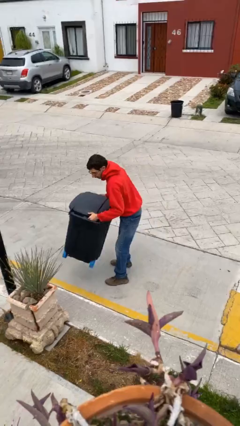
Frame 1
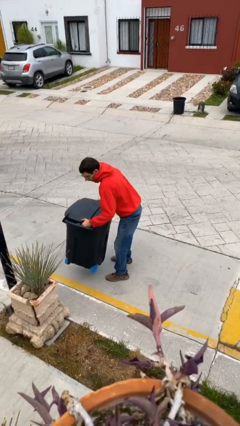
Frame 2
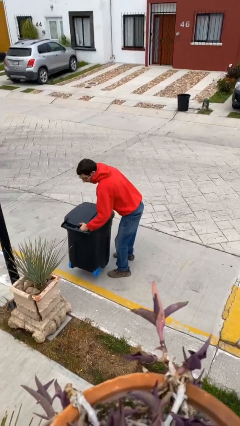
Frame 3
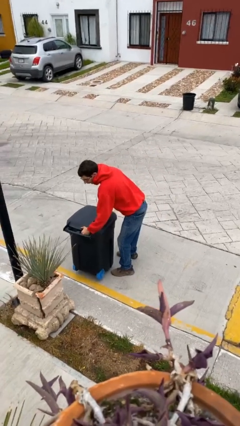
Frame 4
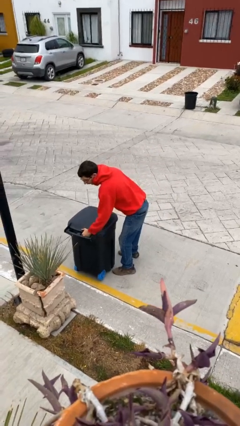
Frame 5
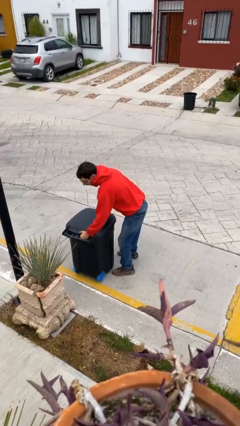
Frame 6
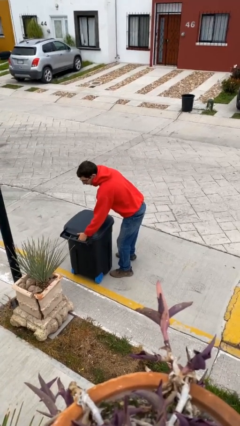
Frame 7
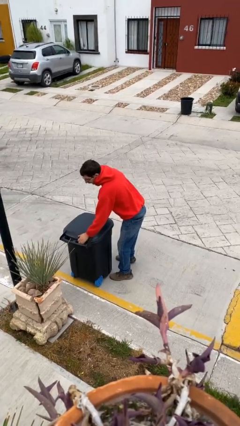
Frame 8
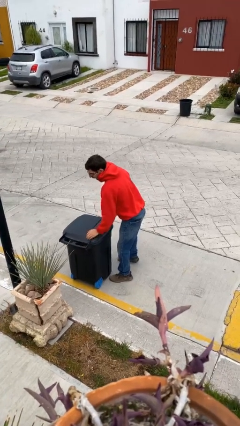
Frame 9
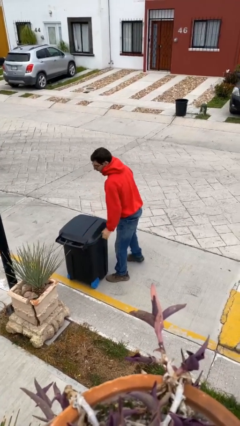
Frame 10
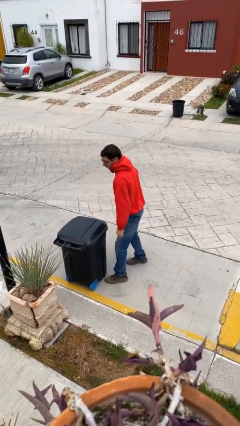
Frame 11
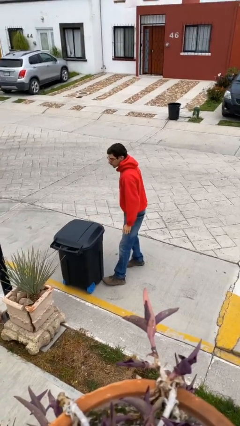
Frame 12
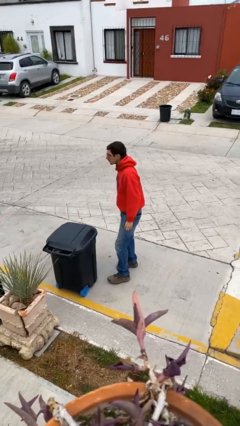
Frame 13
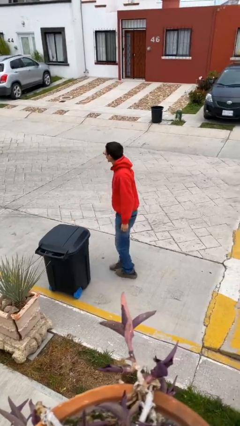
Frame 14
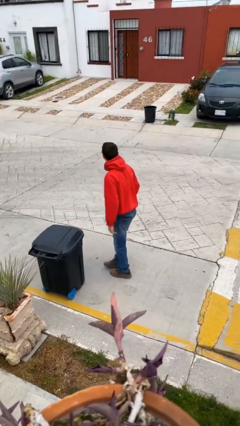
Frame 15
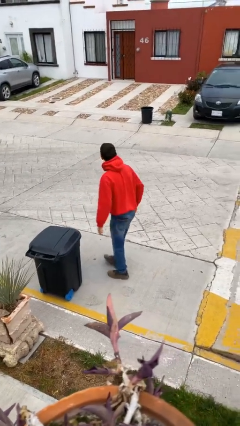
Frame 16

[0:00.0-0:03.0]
person puts down object on floor

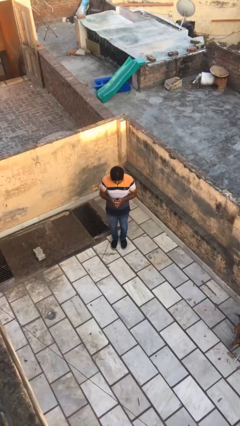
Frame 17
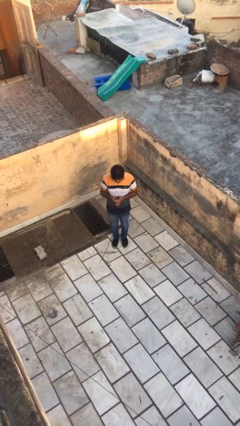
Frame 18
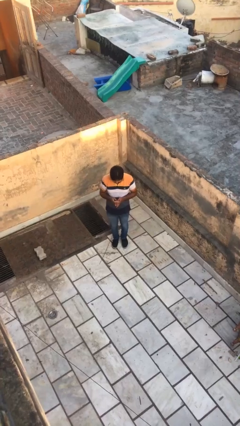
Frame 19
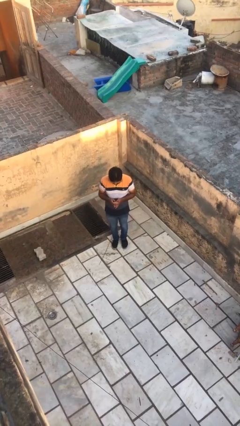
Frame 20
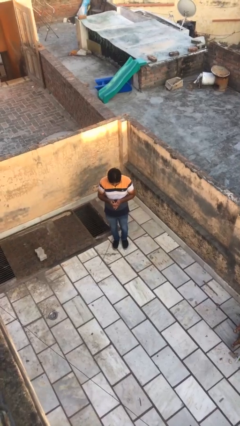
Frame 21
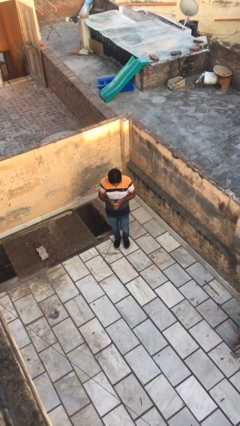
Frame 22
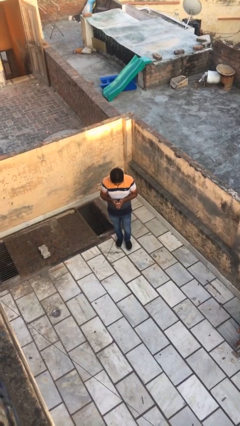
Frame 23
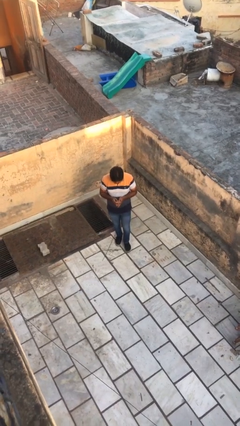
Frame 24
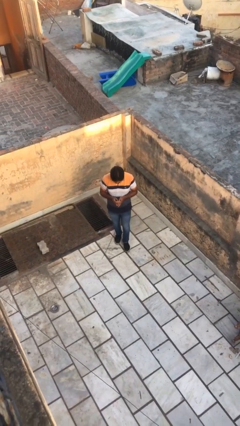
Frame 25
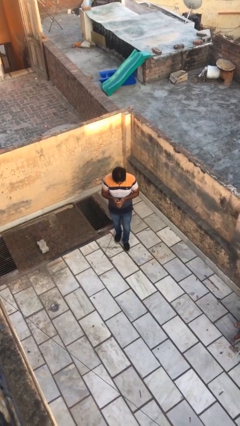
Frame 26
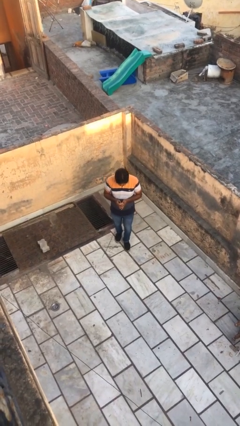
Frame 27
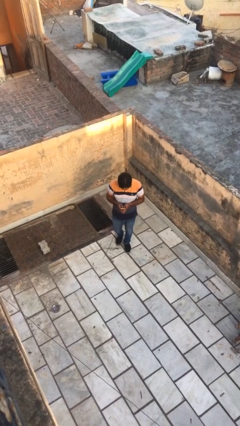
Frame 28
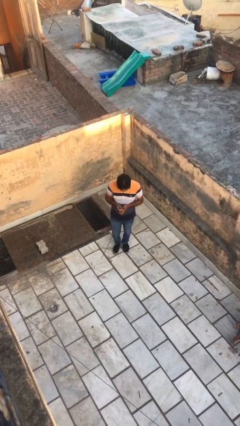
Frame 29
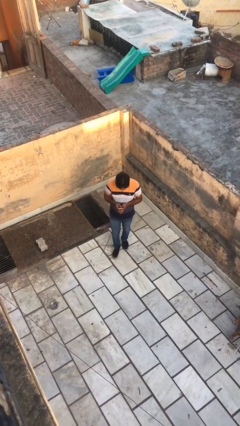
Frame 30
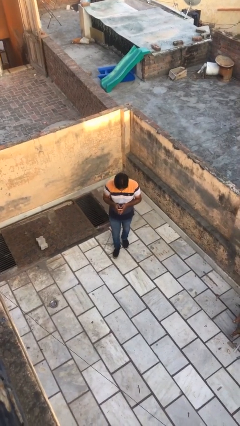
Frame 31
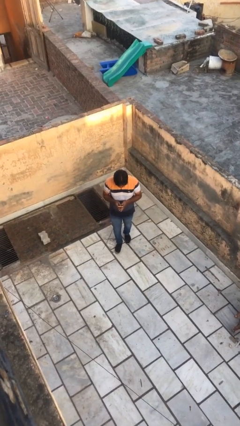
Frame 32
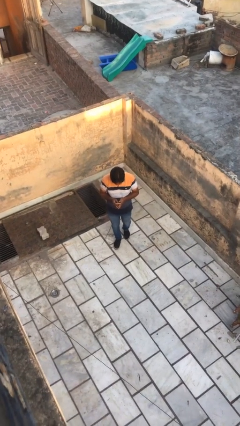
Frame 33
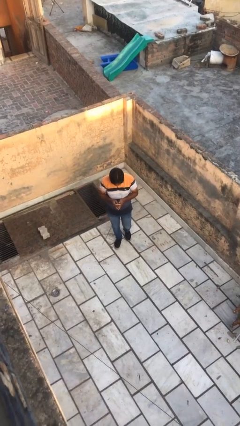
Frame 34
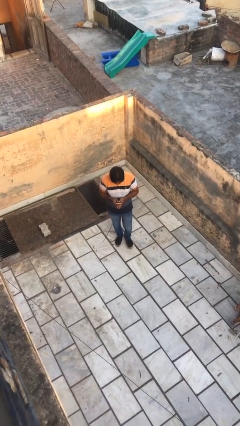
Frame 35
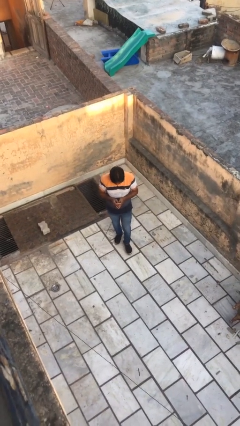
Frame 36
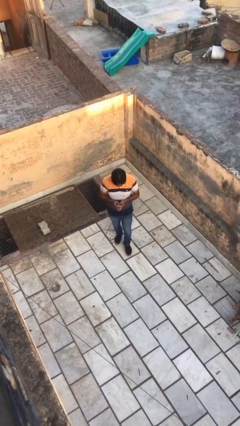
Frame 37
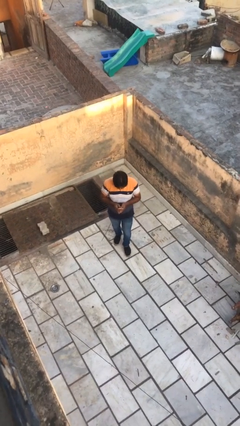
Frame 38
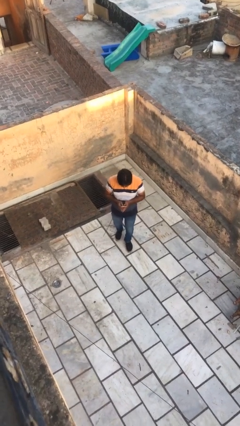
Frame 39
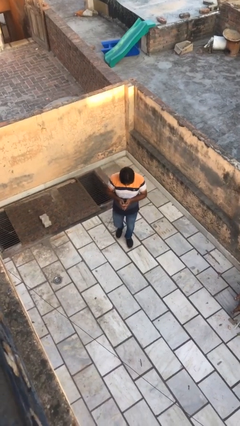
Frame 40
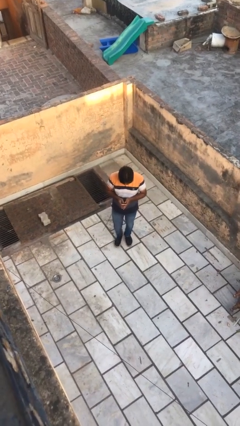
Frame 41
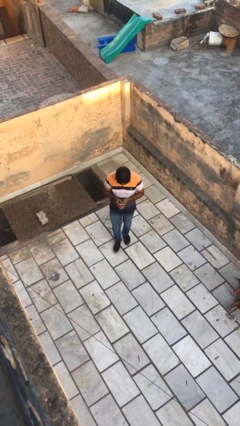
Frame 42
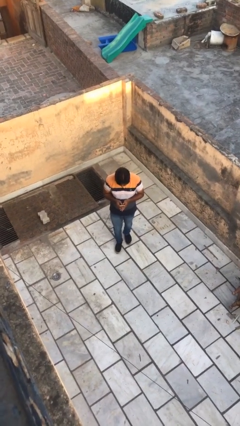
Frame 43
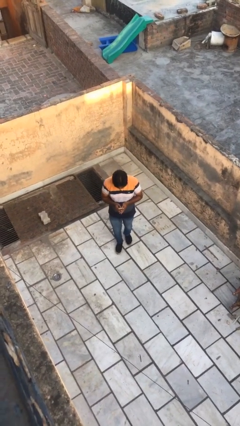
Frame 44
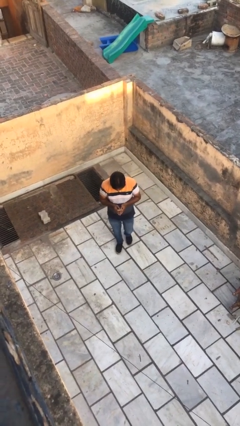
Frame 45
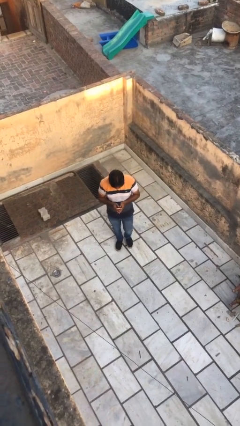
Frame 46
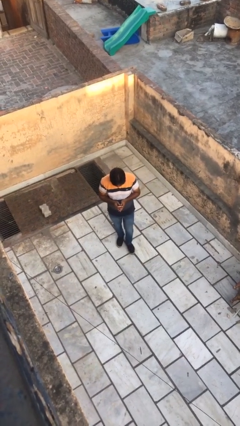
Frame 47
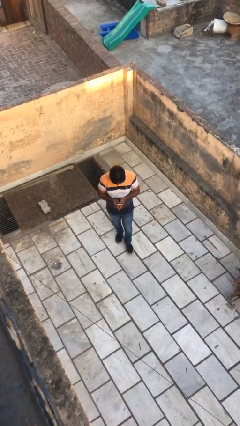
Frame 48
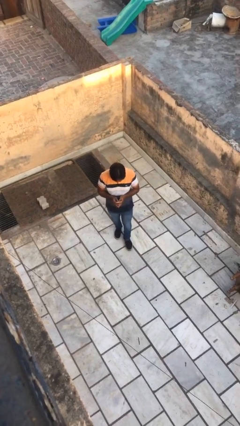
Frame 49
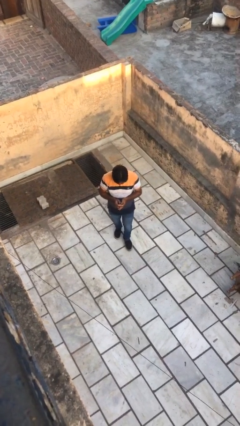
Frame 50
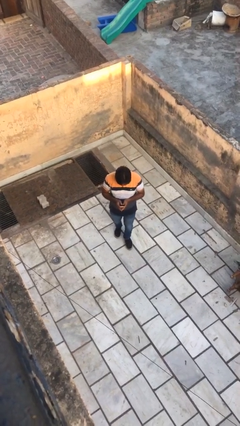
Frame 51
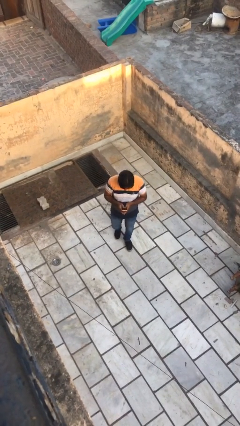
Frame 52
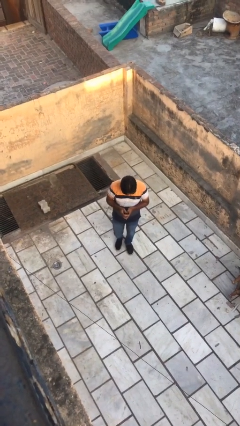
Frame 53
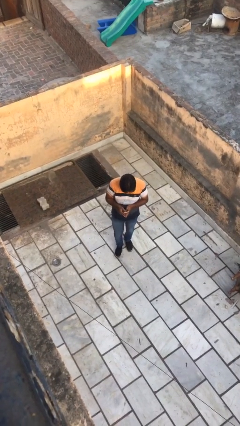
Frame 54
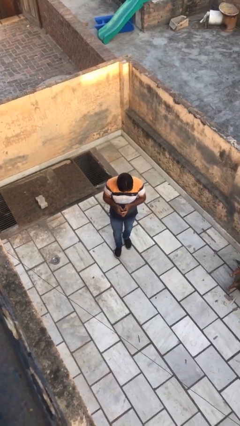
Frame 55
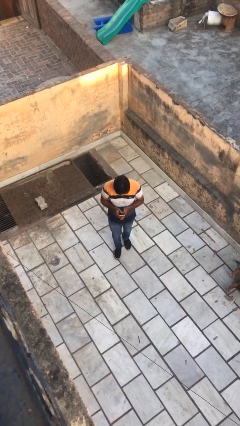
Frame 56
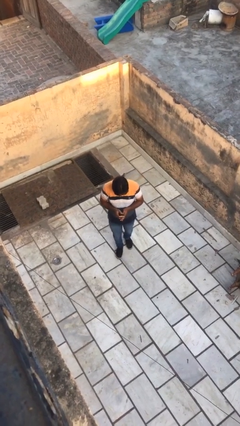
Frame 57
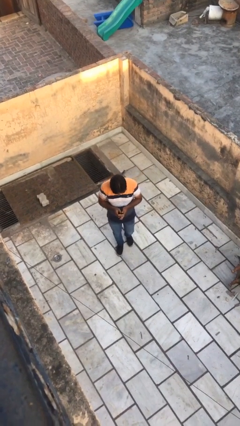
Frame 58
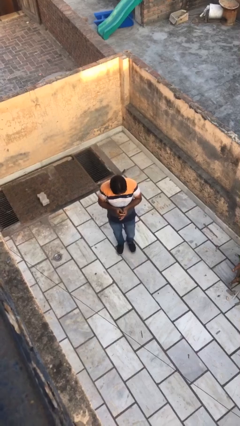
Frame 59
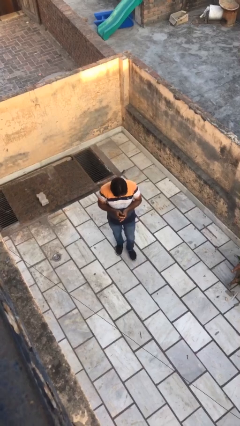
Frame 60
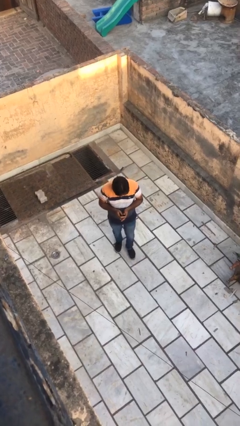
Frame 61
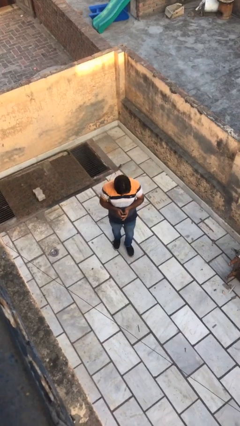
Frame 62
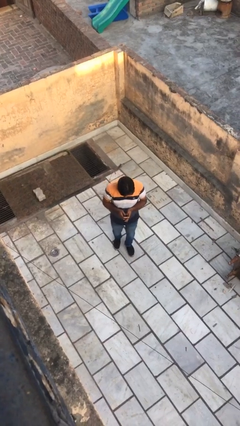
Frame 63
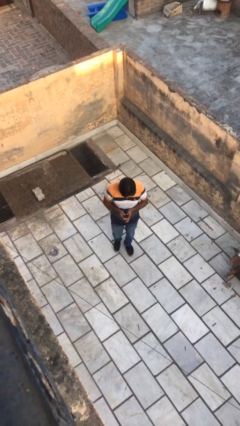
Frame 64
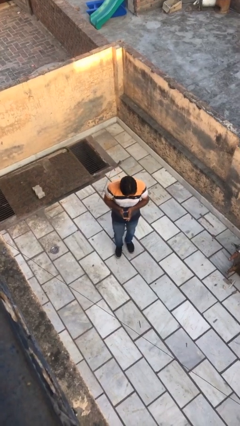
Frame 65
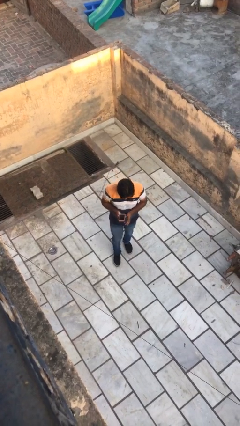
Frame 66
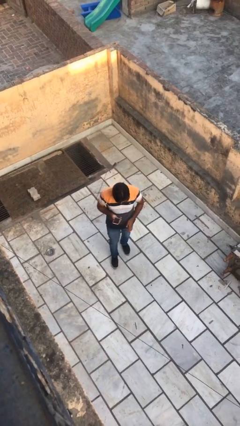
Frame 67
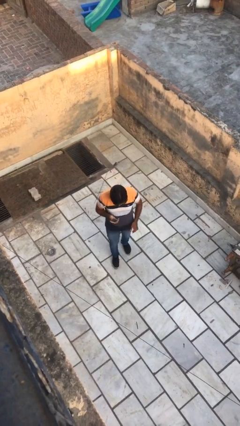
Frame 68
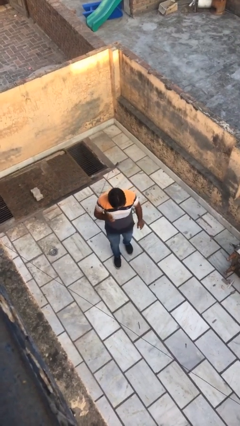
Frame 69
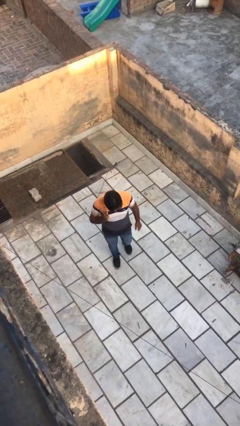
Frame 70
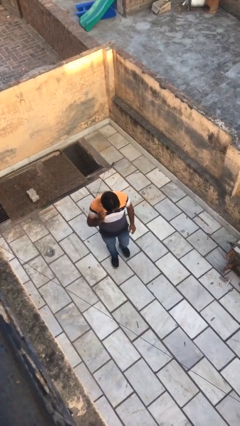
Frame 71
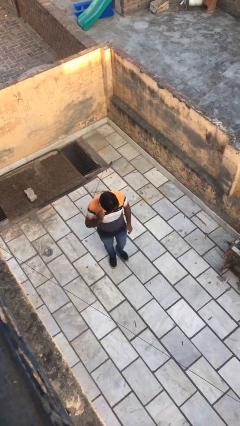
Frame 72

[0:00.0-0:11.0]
person texts on phone

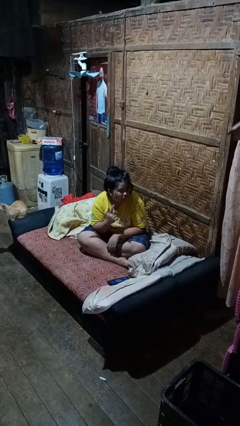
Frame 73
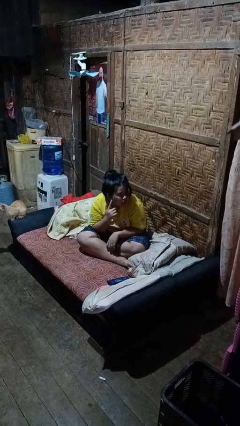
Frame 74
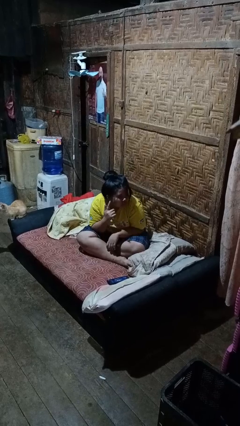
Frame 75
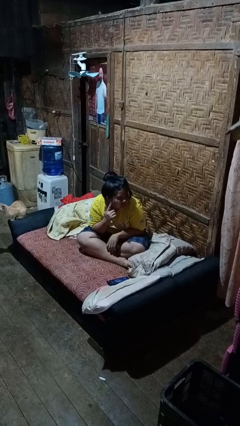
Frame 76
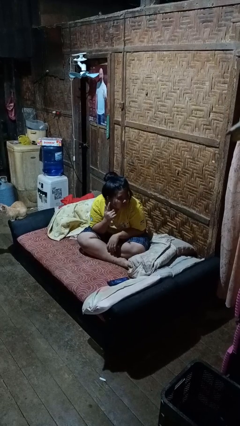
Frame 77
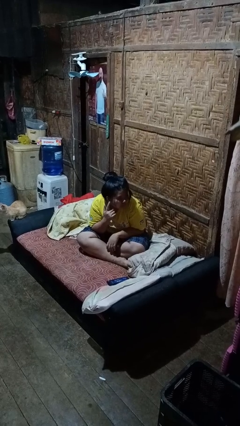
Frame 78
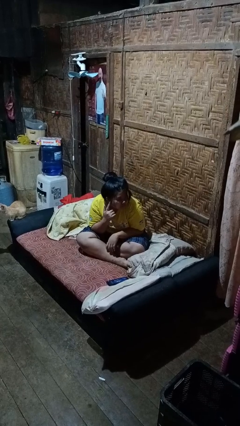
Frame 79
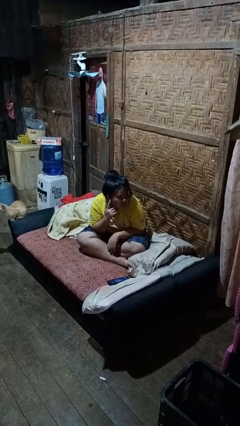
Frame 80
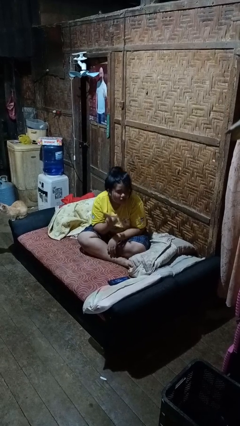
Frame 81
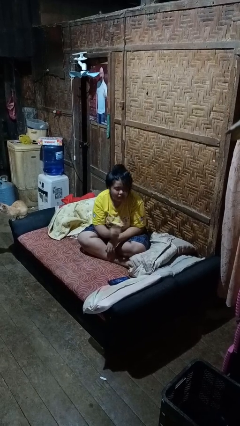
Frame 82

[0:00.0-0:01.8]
person gestures listen closely

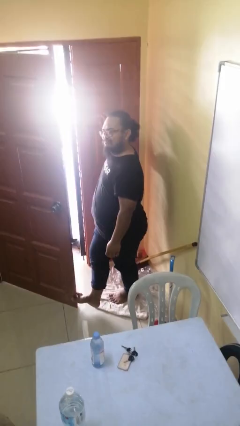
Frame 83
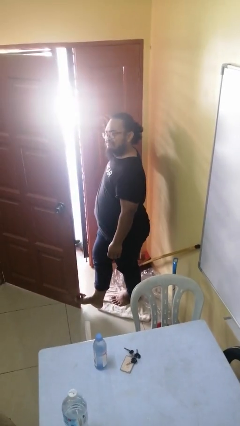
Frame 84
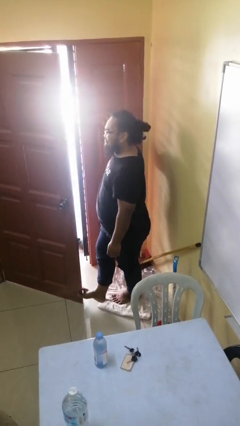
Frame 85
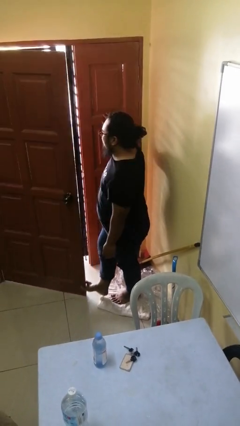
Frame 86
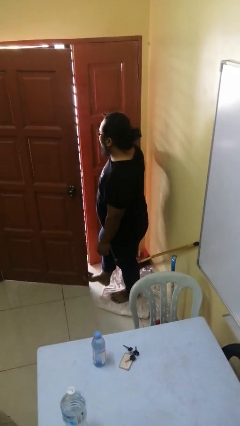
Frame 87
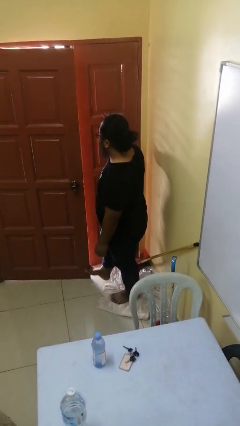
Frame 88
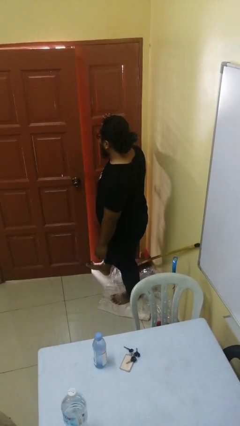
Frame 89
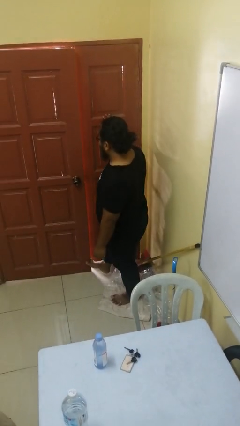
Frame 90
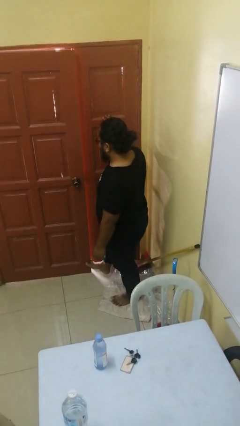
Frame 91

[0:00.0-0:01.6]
person closes door with foot
